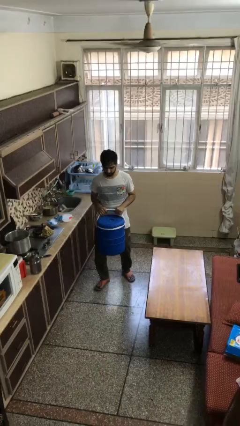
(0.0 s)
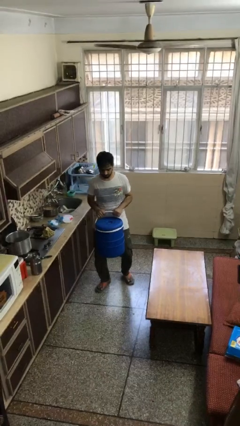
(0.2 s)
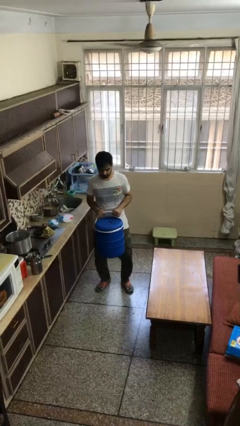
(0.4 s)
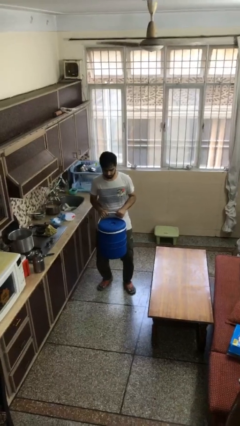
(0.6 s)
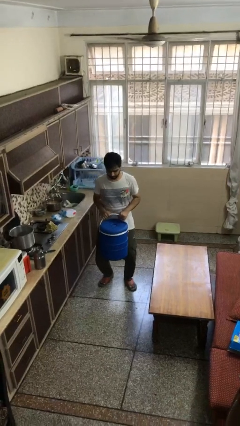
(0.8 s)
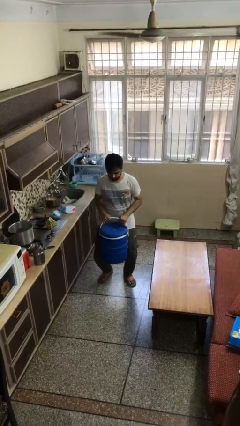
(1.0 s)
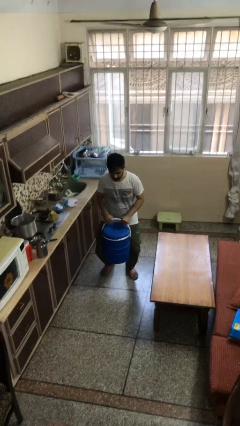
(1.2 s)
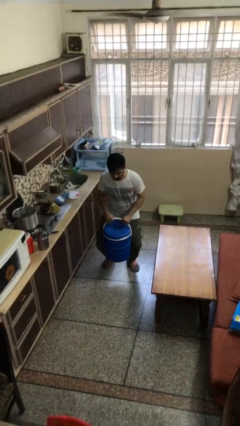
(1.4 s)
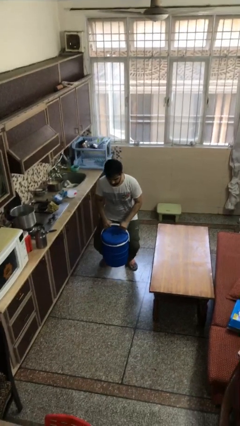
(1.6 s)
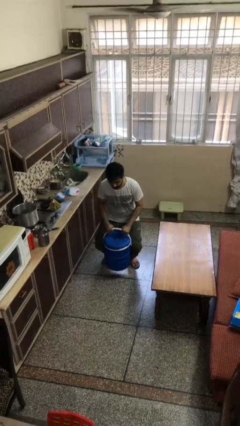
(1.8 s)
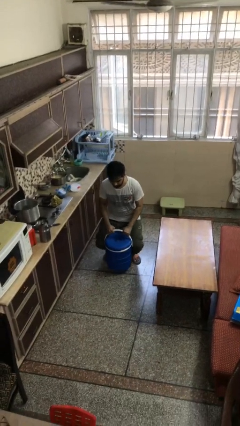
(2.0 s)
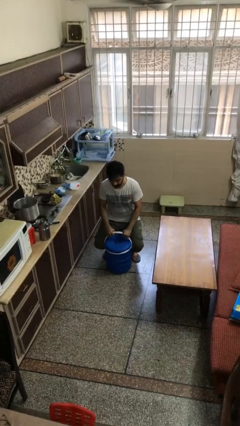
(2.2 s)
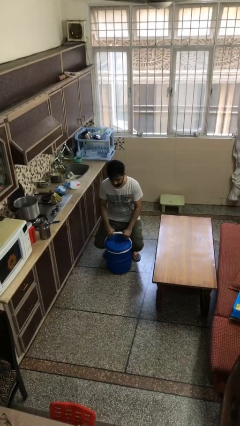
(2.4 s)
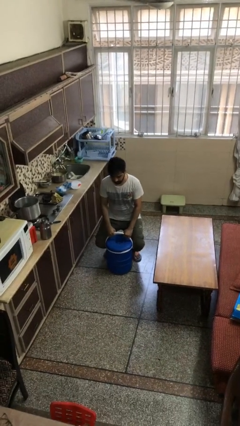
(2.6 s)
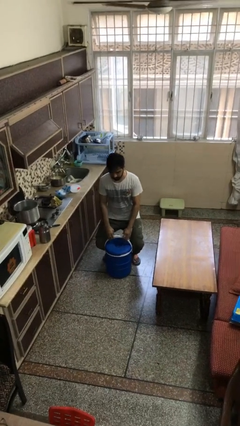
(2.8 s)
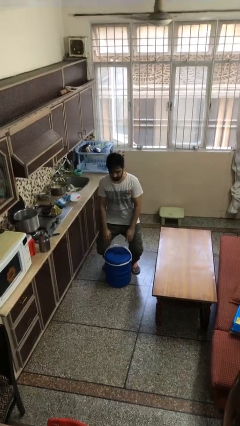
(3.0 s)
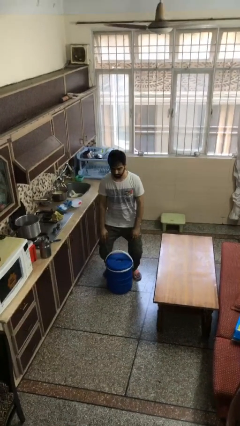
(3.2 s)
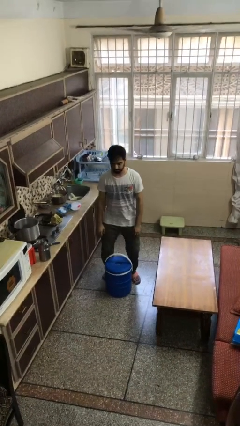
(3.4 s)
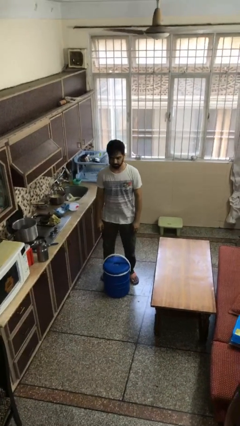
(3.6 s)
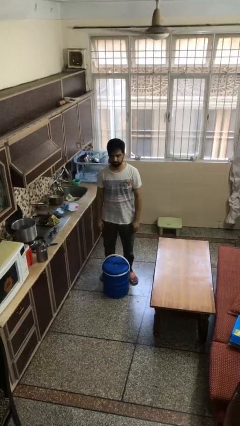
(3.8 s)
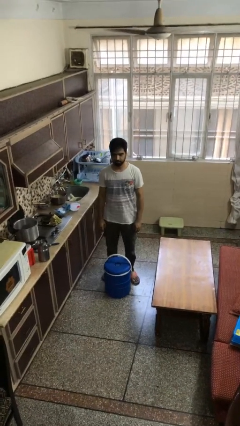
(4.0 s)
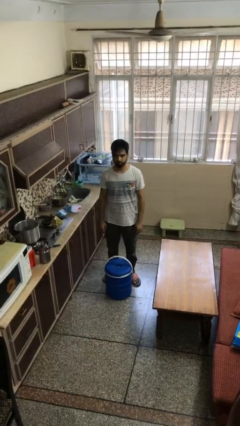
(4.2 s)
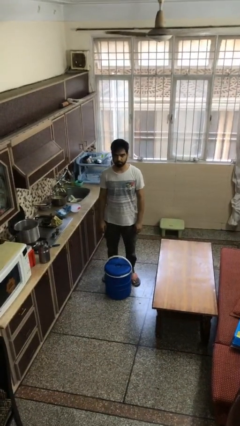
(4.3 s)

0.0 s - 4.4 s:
person puts down object on floor

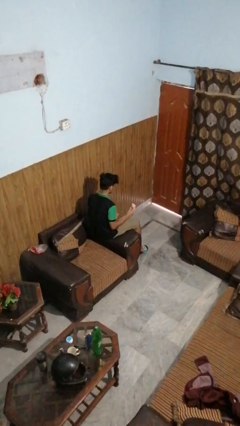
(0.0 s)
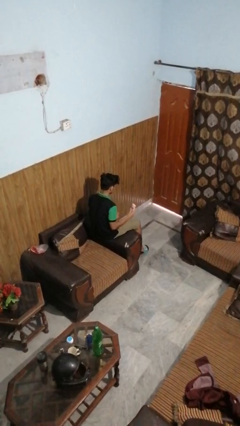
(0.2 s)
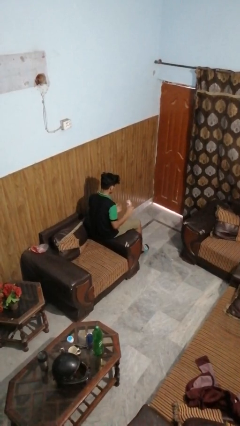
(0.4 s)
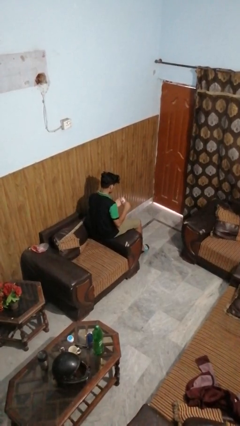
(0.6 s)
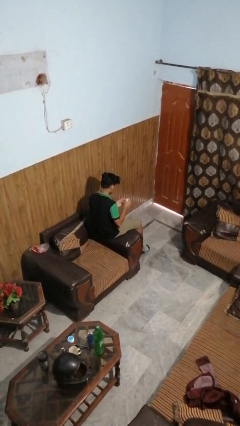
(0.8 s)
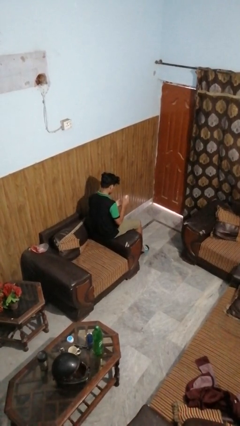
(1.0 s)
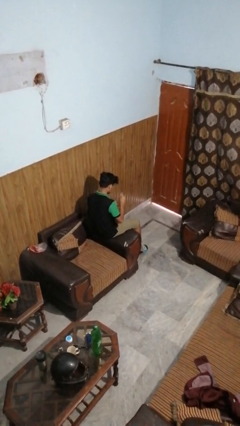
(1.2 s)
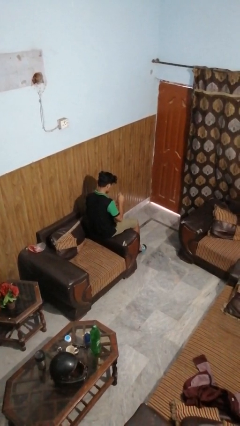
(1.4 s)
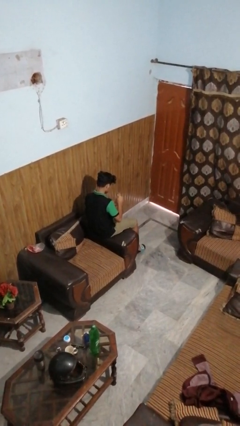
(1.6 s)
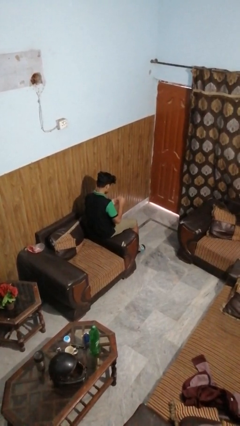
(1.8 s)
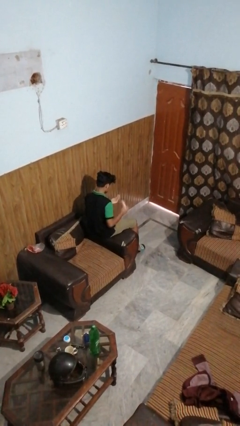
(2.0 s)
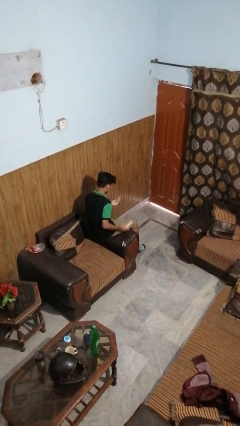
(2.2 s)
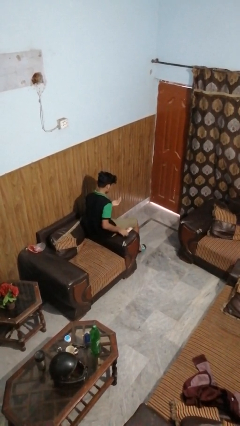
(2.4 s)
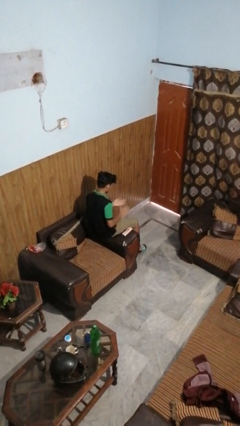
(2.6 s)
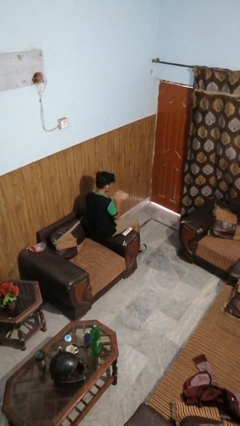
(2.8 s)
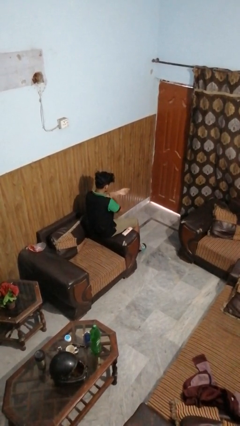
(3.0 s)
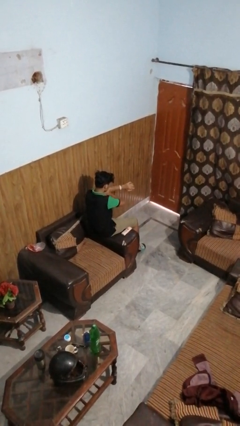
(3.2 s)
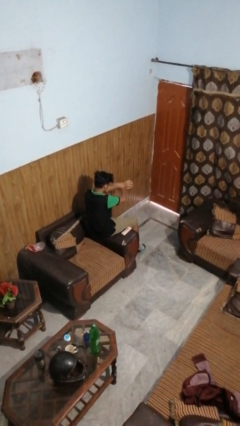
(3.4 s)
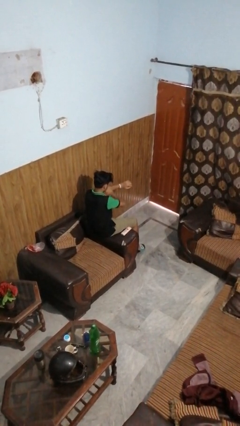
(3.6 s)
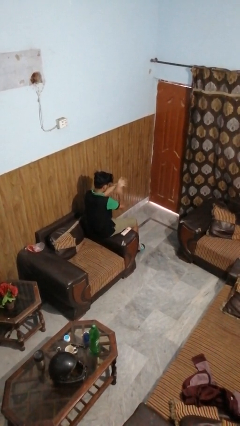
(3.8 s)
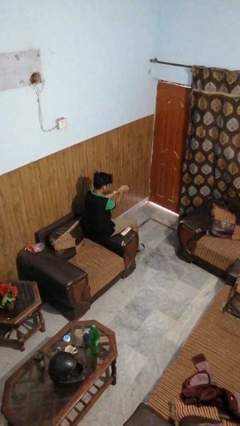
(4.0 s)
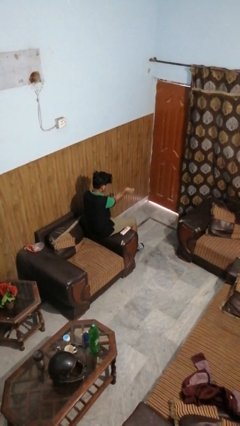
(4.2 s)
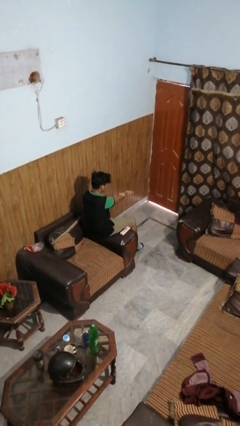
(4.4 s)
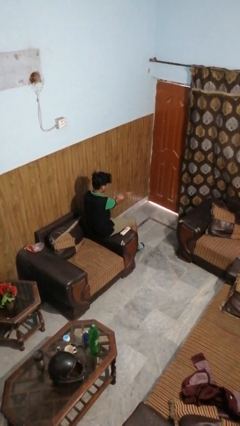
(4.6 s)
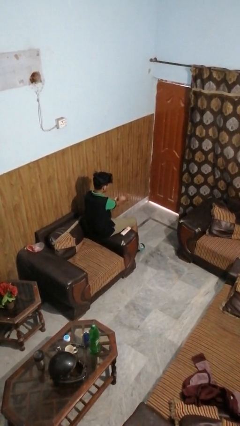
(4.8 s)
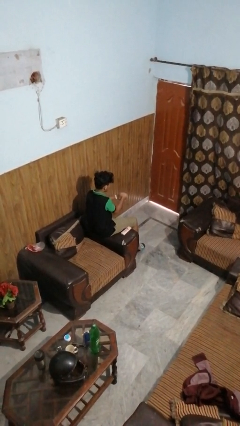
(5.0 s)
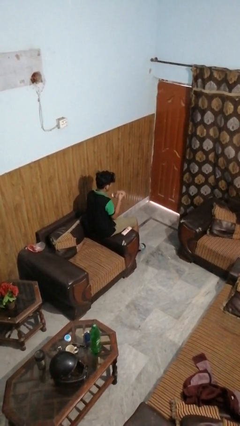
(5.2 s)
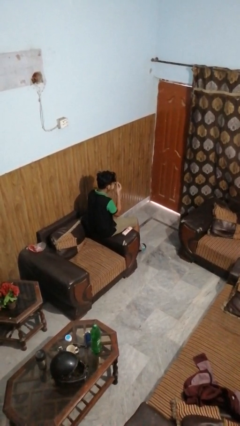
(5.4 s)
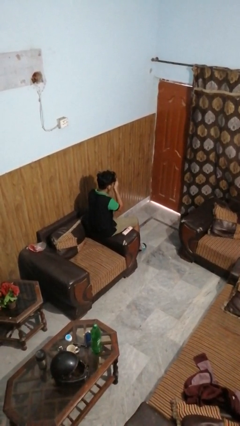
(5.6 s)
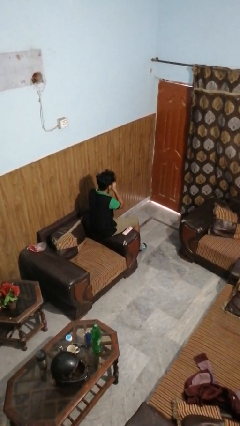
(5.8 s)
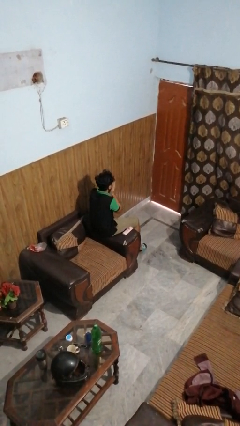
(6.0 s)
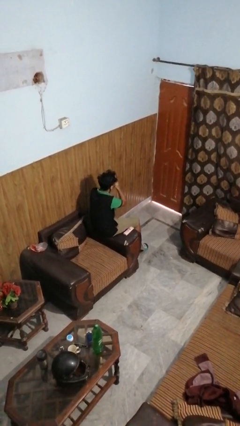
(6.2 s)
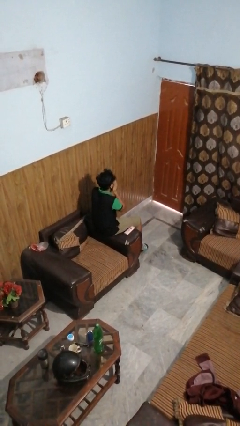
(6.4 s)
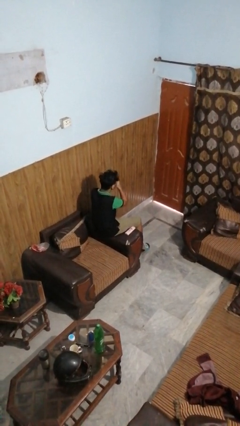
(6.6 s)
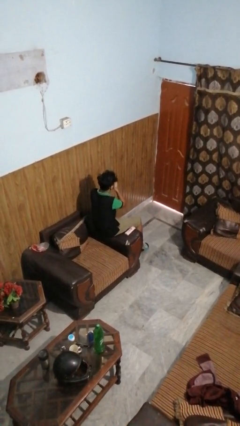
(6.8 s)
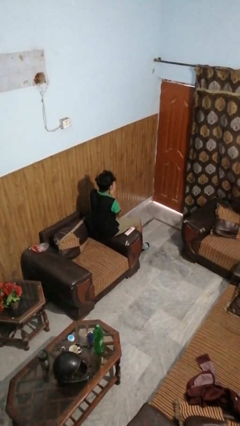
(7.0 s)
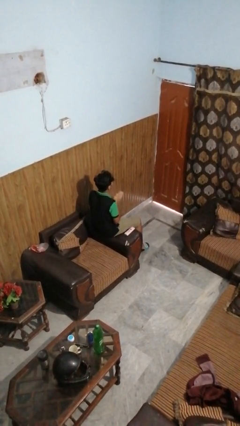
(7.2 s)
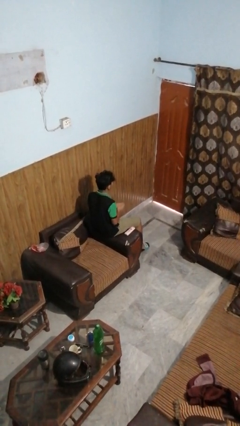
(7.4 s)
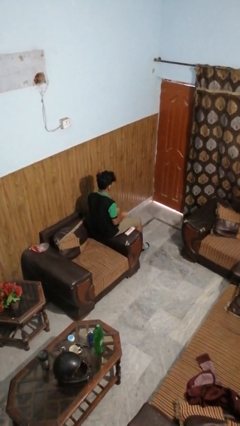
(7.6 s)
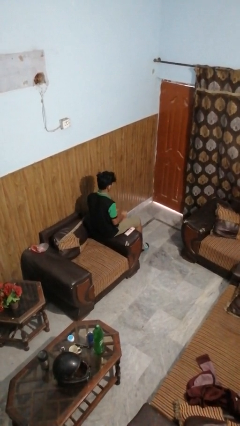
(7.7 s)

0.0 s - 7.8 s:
person applies sunscreen

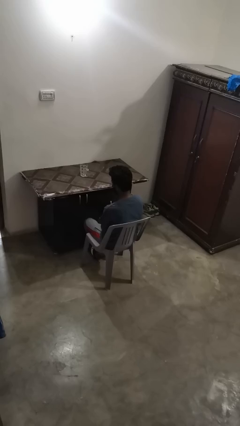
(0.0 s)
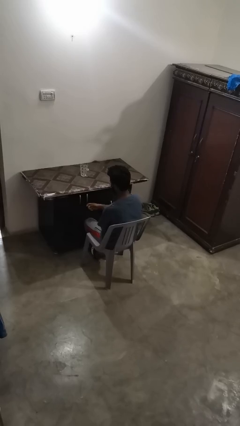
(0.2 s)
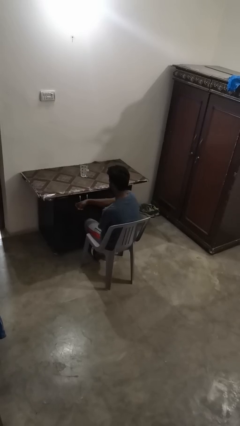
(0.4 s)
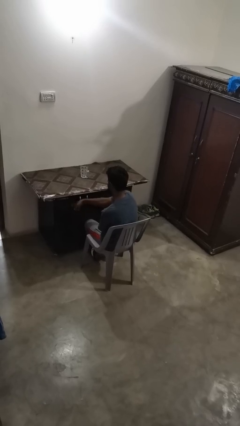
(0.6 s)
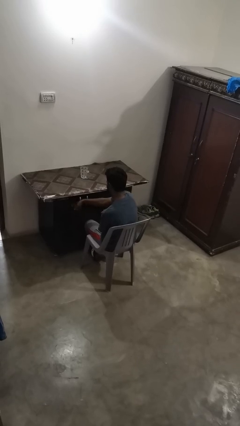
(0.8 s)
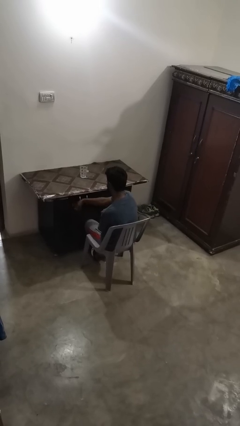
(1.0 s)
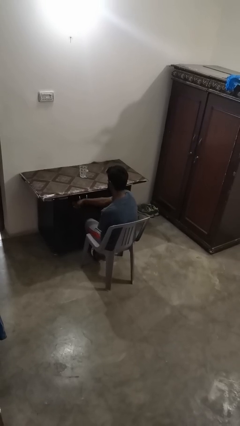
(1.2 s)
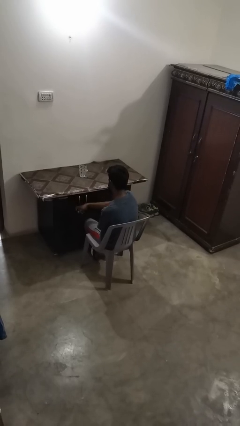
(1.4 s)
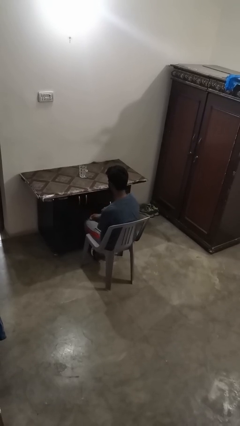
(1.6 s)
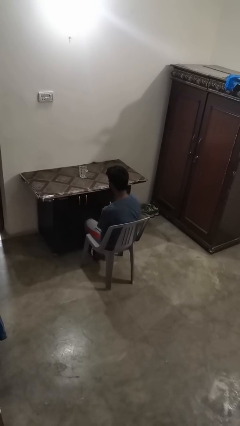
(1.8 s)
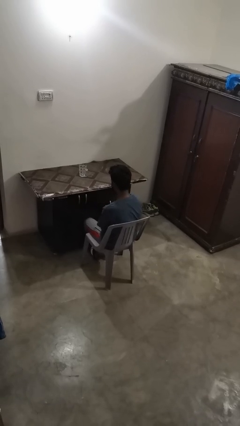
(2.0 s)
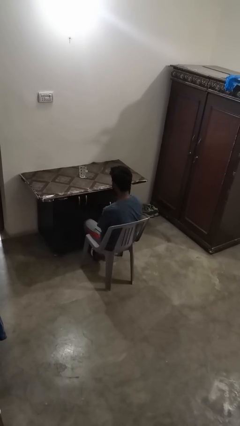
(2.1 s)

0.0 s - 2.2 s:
person knocks over furniture

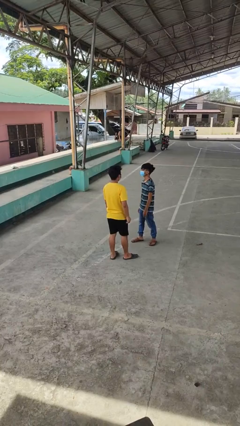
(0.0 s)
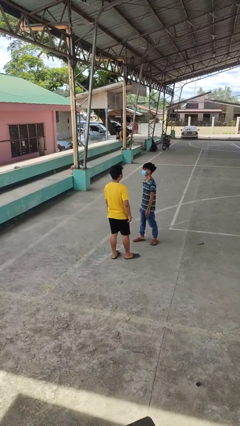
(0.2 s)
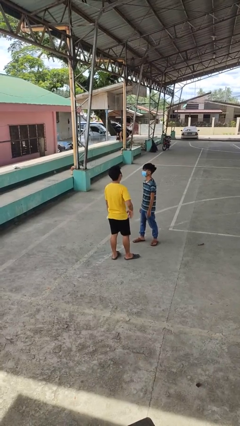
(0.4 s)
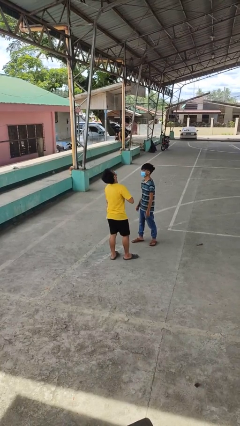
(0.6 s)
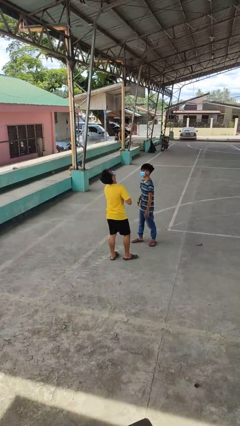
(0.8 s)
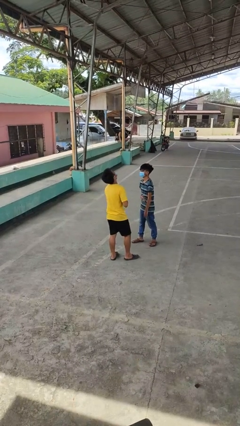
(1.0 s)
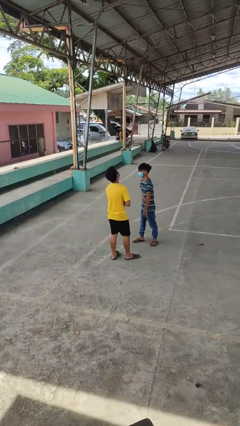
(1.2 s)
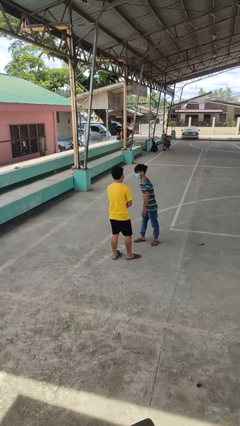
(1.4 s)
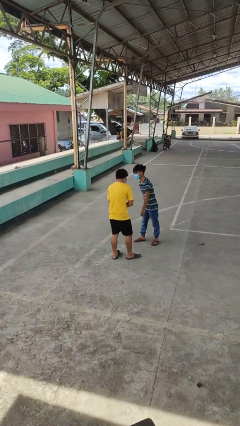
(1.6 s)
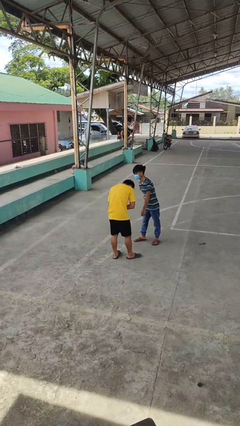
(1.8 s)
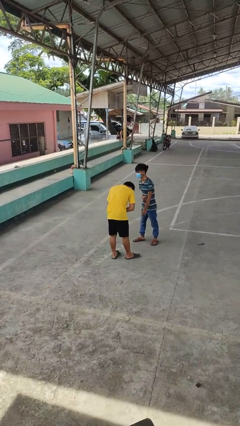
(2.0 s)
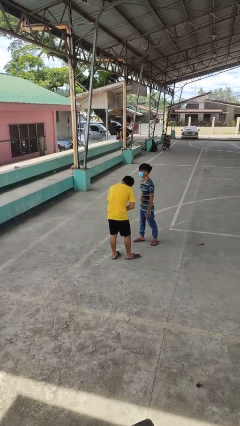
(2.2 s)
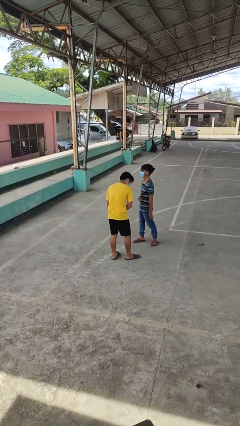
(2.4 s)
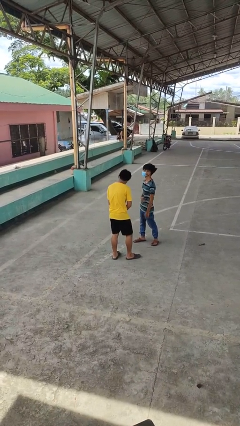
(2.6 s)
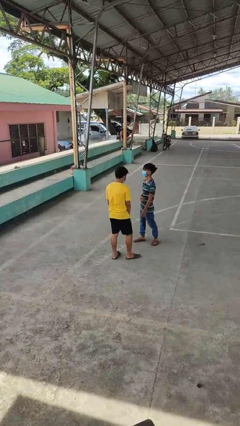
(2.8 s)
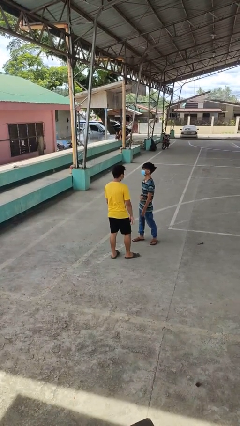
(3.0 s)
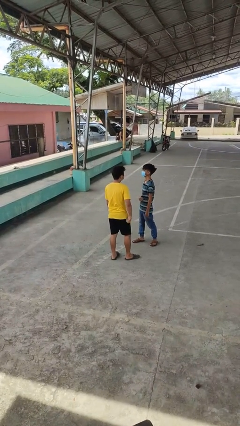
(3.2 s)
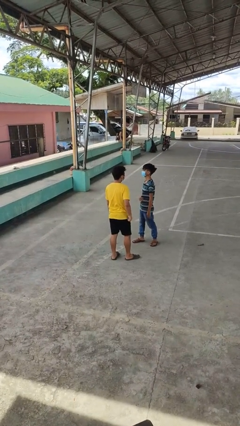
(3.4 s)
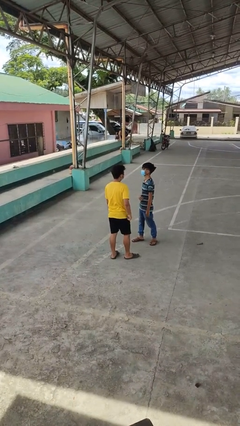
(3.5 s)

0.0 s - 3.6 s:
person laughs with person
